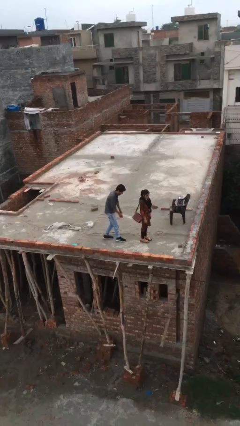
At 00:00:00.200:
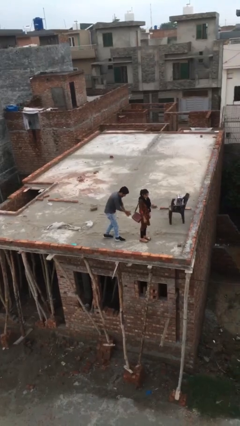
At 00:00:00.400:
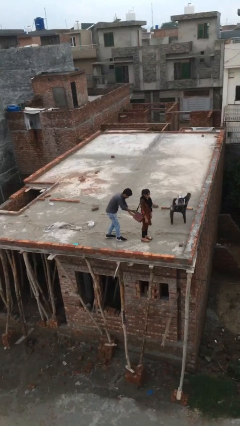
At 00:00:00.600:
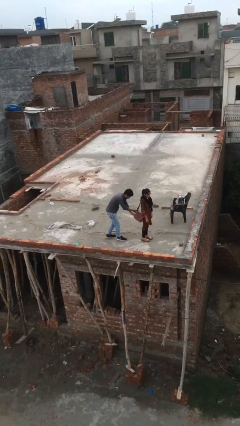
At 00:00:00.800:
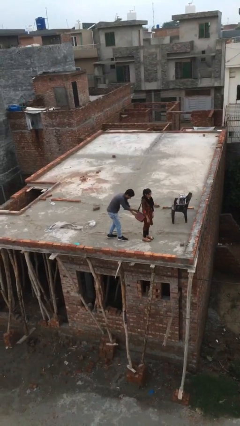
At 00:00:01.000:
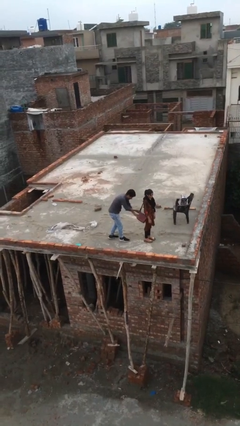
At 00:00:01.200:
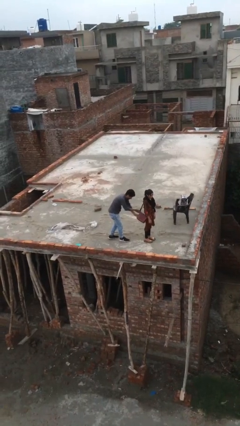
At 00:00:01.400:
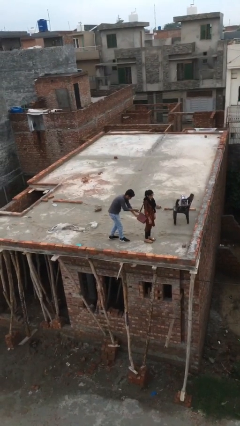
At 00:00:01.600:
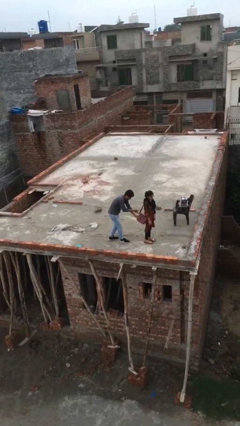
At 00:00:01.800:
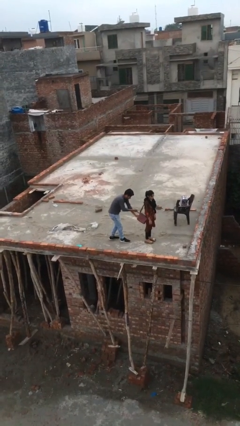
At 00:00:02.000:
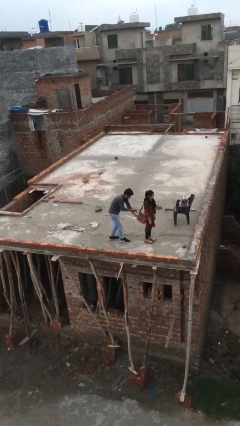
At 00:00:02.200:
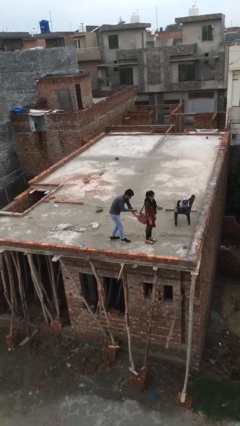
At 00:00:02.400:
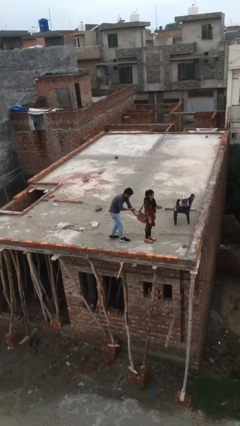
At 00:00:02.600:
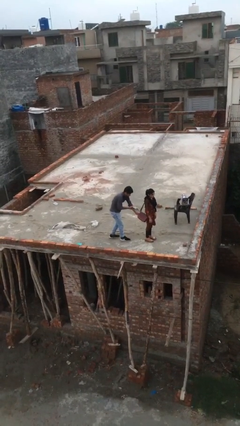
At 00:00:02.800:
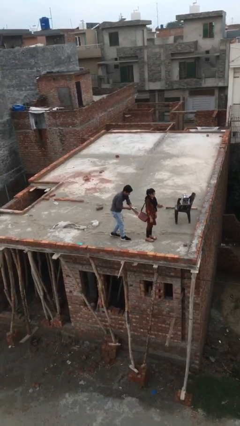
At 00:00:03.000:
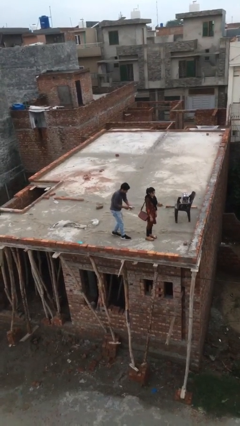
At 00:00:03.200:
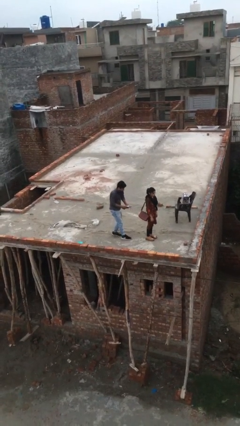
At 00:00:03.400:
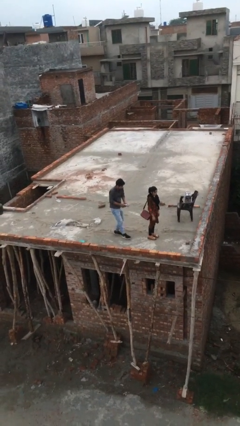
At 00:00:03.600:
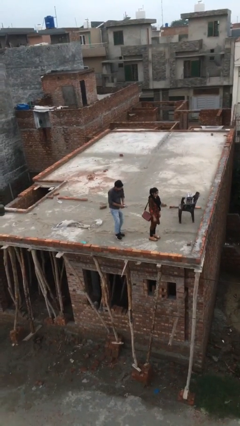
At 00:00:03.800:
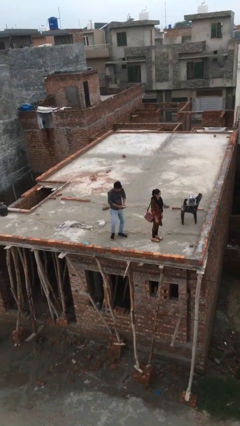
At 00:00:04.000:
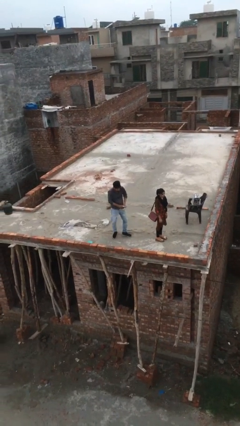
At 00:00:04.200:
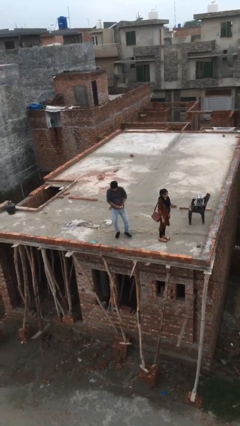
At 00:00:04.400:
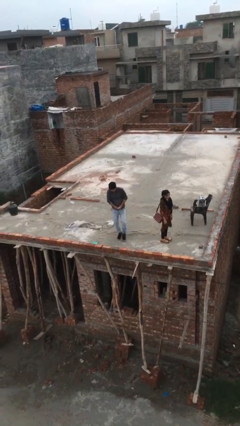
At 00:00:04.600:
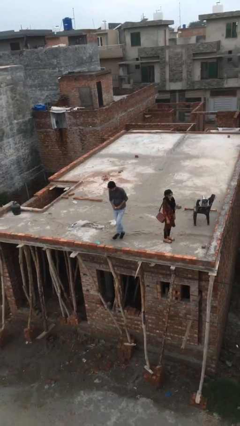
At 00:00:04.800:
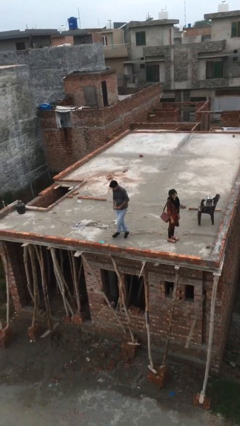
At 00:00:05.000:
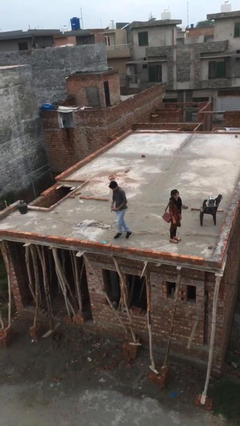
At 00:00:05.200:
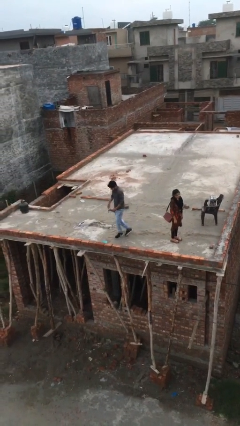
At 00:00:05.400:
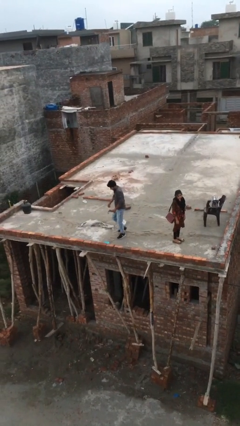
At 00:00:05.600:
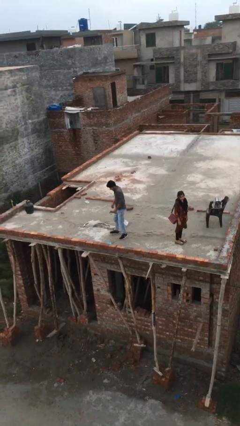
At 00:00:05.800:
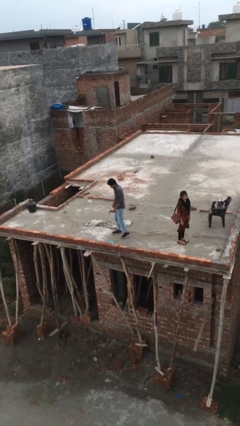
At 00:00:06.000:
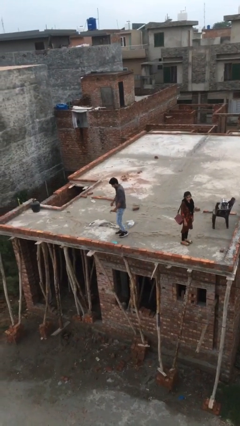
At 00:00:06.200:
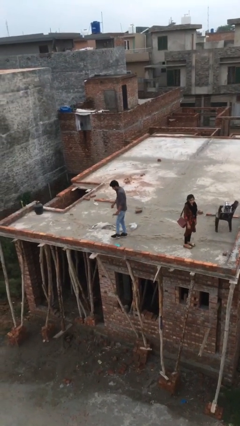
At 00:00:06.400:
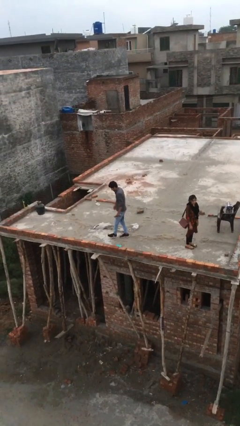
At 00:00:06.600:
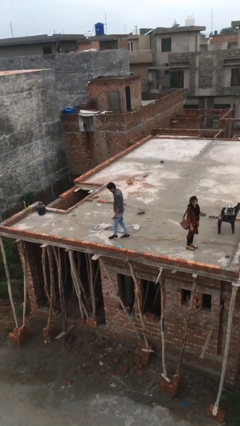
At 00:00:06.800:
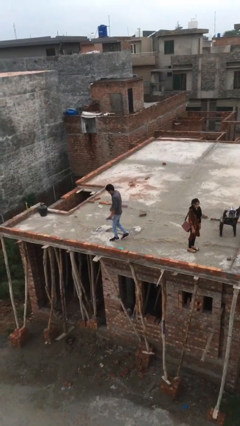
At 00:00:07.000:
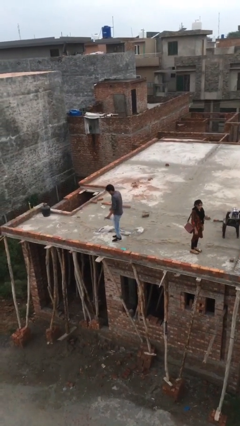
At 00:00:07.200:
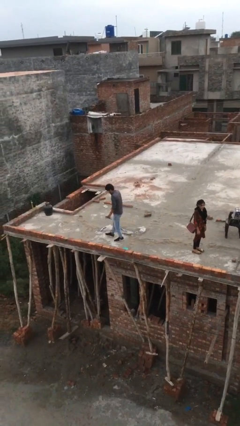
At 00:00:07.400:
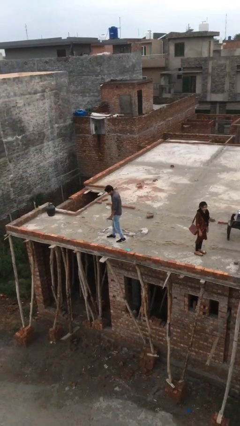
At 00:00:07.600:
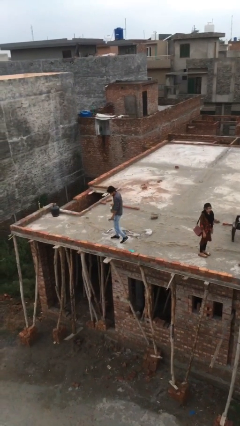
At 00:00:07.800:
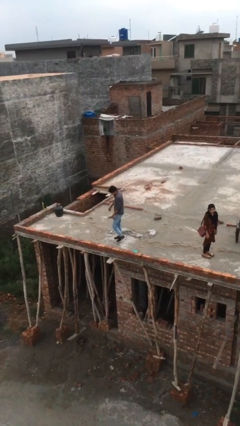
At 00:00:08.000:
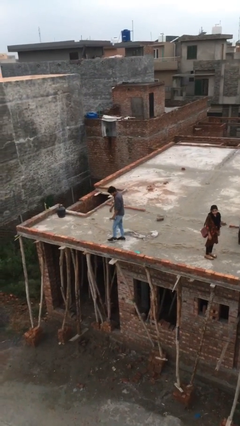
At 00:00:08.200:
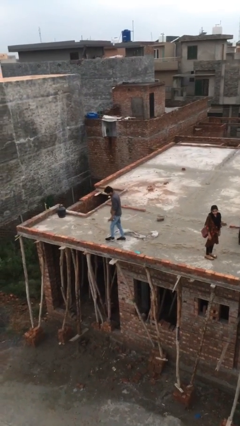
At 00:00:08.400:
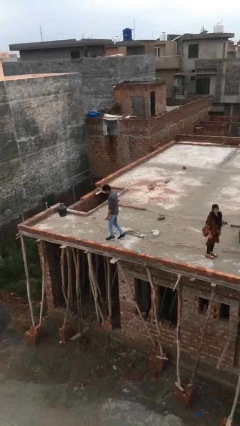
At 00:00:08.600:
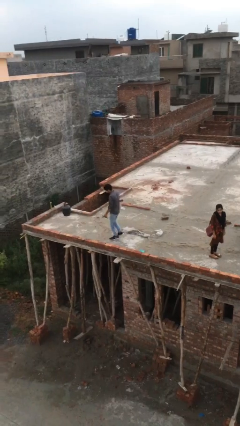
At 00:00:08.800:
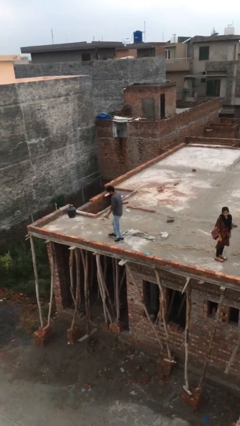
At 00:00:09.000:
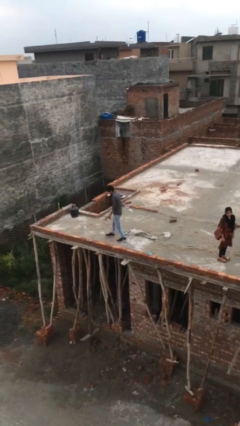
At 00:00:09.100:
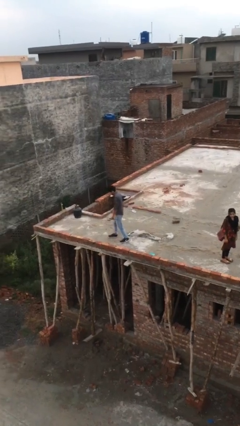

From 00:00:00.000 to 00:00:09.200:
person steals object from person

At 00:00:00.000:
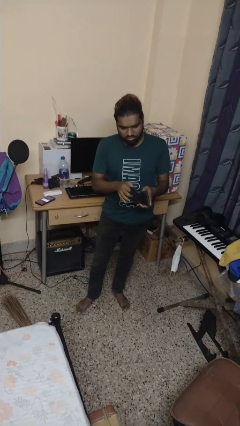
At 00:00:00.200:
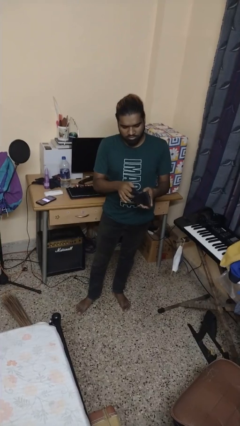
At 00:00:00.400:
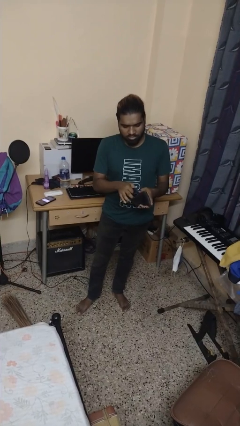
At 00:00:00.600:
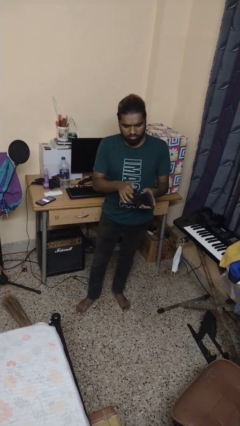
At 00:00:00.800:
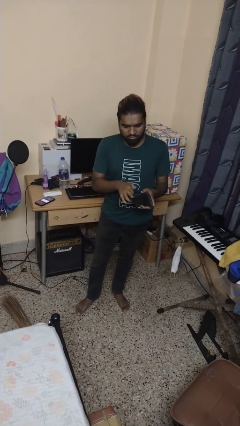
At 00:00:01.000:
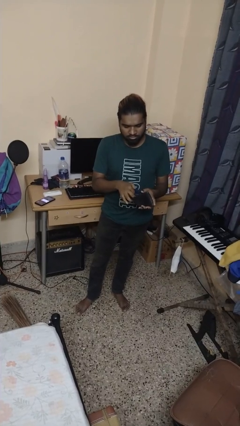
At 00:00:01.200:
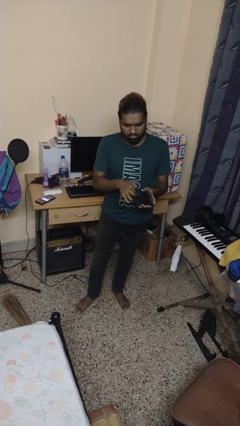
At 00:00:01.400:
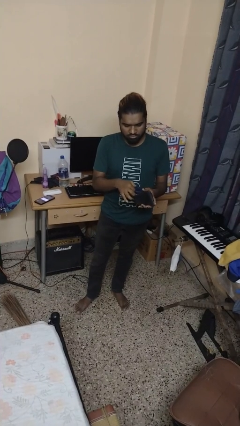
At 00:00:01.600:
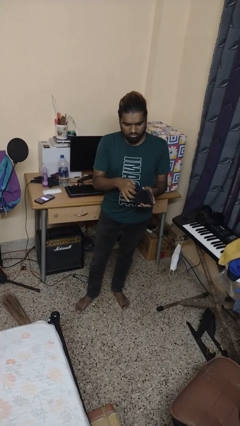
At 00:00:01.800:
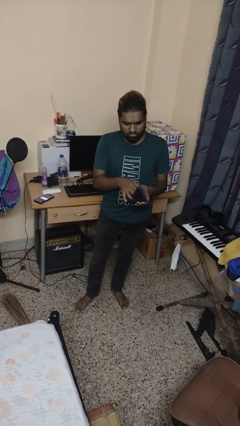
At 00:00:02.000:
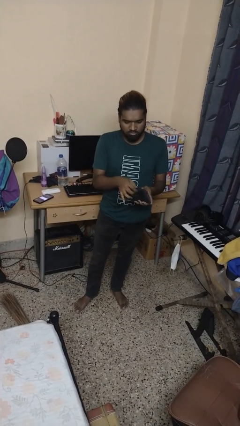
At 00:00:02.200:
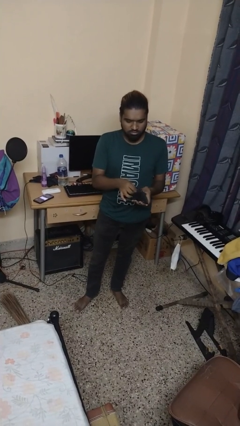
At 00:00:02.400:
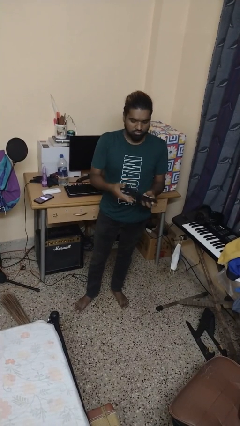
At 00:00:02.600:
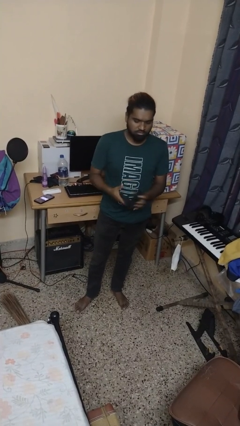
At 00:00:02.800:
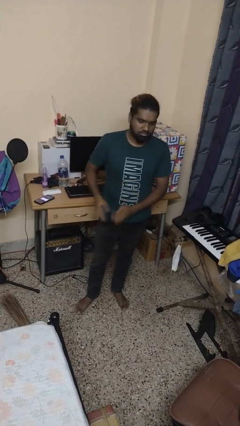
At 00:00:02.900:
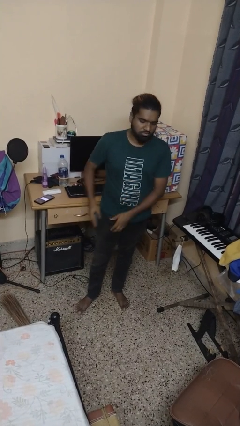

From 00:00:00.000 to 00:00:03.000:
person puts object into purse

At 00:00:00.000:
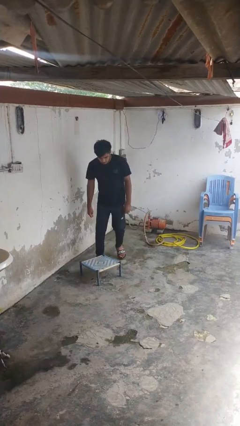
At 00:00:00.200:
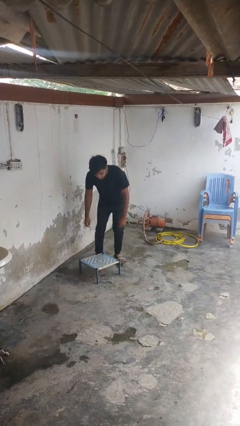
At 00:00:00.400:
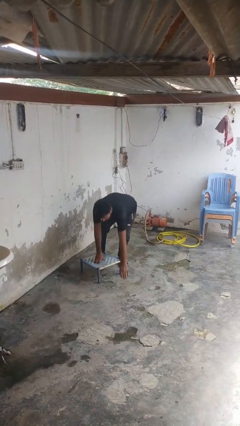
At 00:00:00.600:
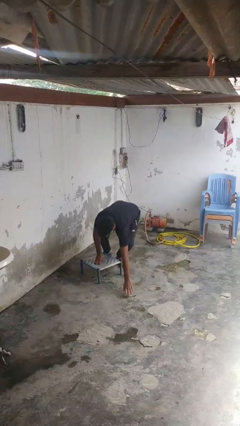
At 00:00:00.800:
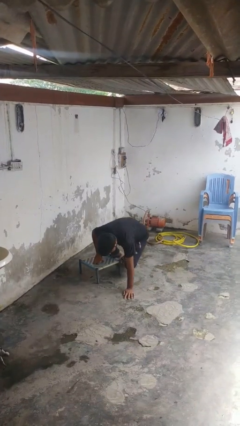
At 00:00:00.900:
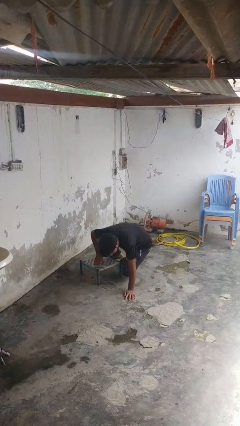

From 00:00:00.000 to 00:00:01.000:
person trips on object on floor

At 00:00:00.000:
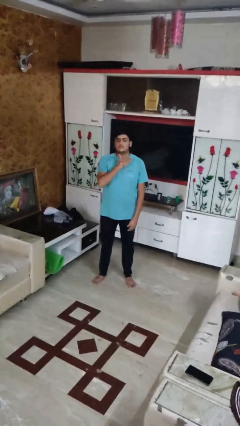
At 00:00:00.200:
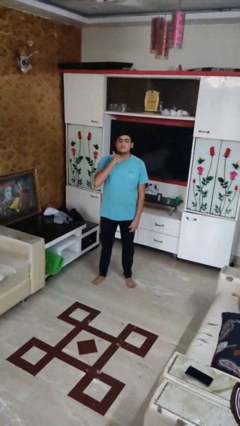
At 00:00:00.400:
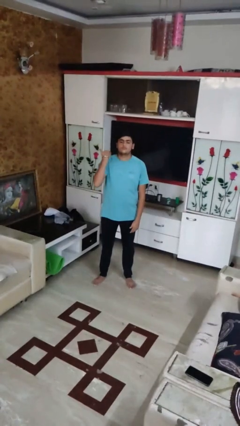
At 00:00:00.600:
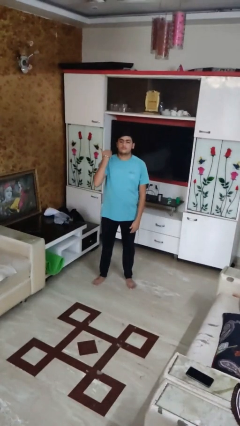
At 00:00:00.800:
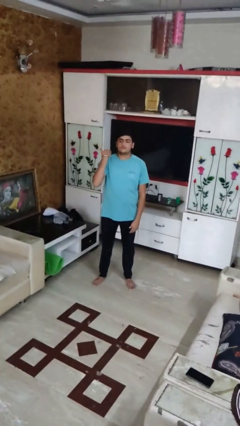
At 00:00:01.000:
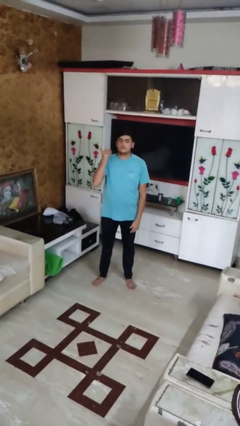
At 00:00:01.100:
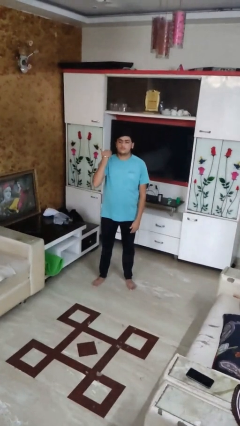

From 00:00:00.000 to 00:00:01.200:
person gestures cut

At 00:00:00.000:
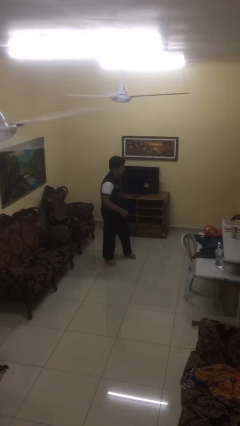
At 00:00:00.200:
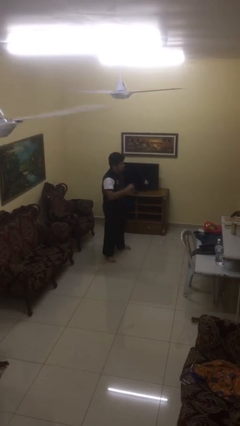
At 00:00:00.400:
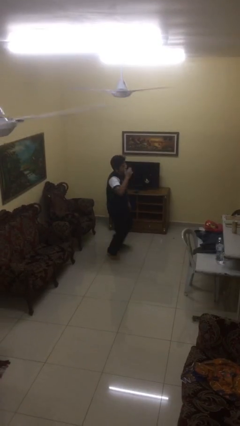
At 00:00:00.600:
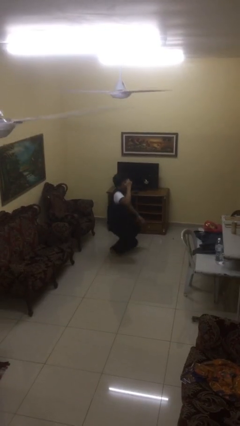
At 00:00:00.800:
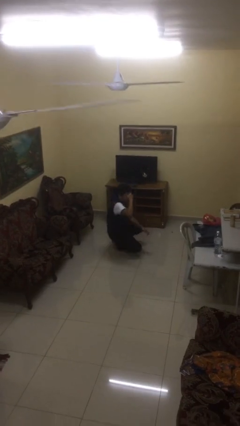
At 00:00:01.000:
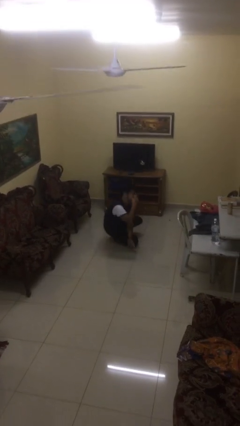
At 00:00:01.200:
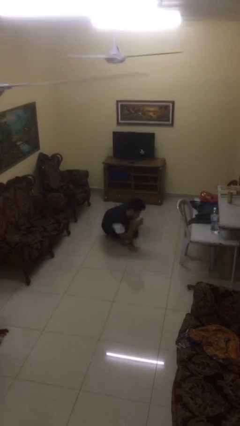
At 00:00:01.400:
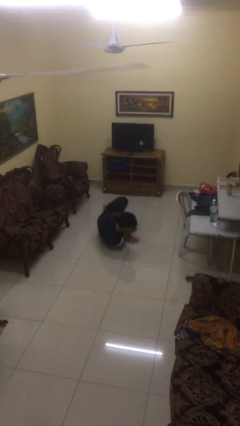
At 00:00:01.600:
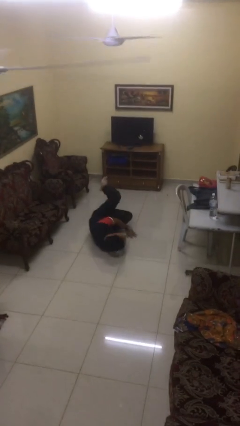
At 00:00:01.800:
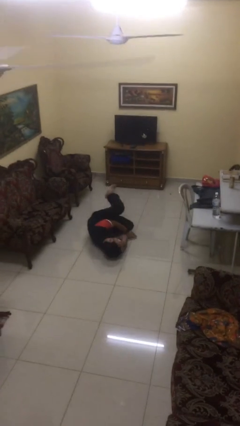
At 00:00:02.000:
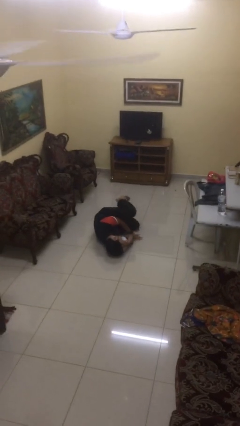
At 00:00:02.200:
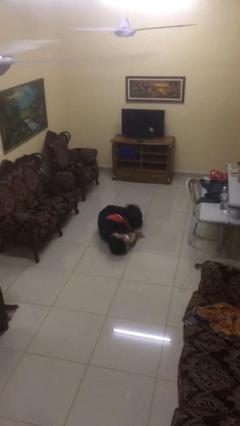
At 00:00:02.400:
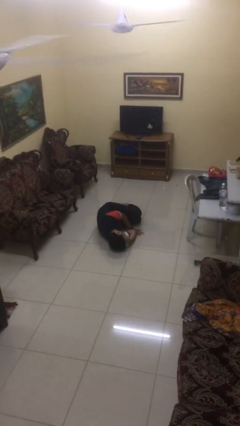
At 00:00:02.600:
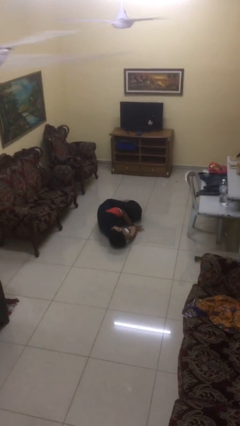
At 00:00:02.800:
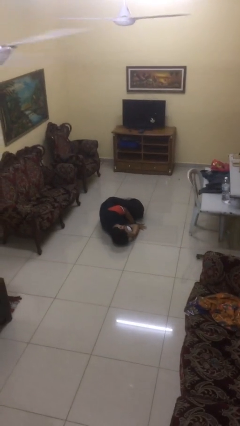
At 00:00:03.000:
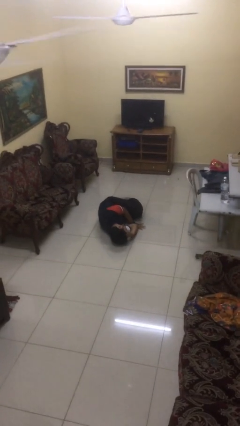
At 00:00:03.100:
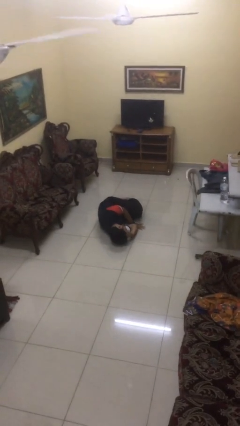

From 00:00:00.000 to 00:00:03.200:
person falls while standing
